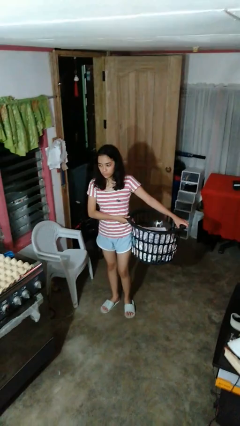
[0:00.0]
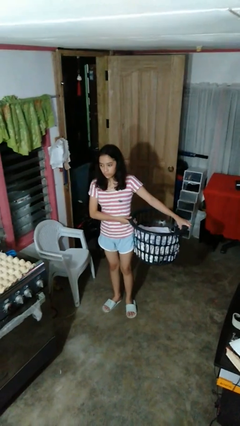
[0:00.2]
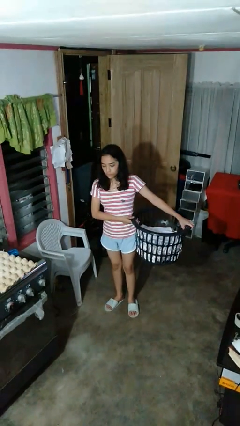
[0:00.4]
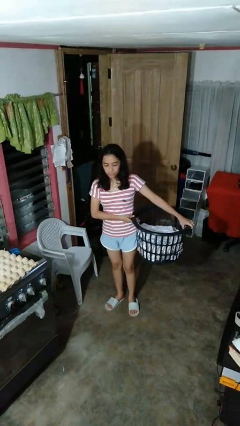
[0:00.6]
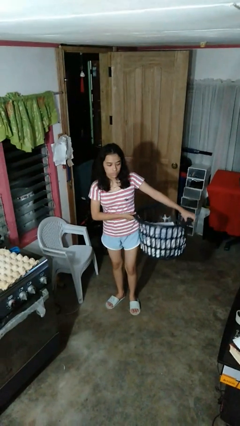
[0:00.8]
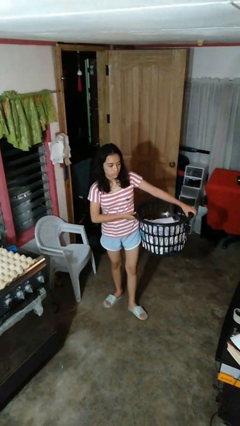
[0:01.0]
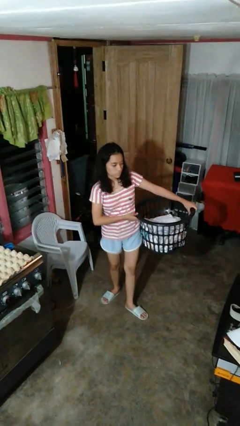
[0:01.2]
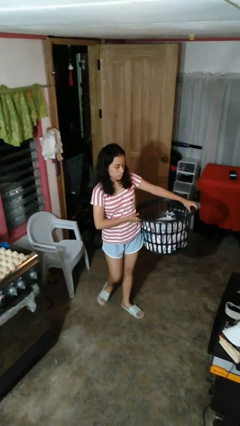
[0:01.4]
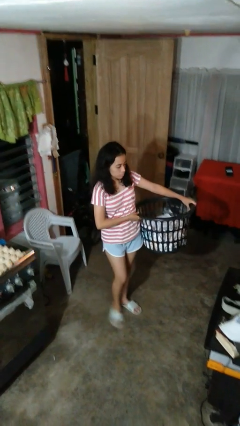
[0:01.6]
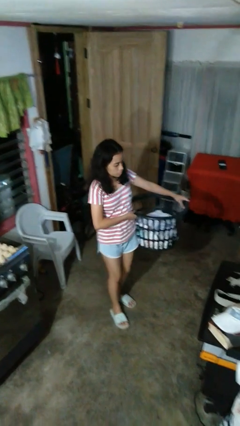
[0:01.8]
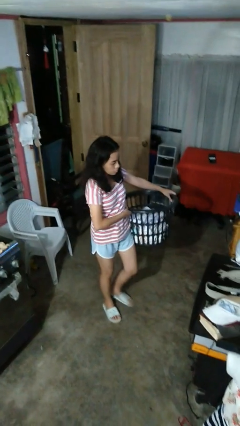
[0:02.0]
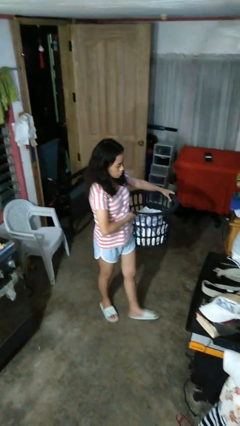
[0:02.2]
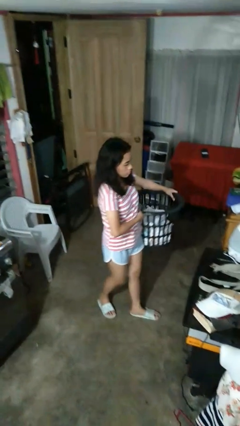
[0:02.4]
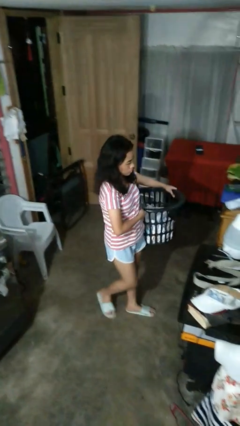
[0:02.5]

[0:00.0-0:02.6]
person carries laundry basket

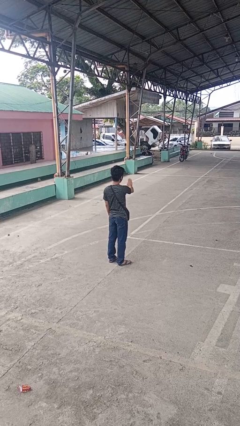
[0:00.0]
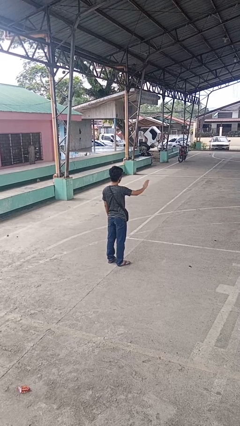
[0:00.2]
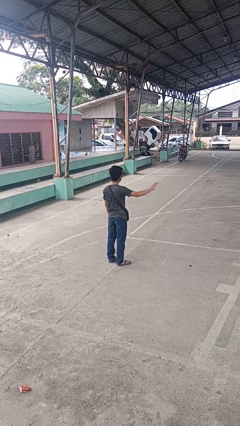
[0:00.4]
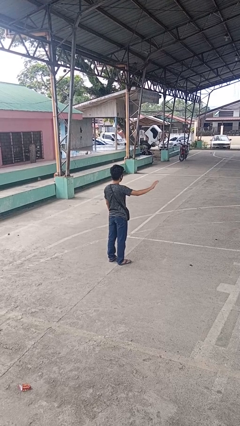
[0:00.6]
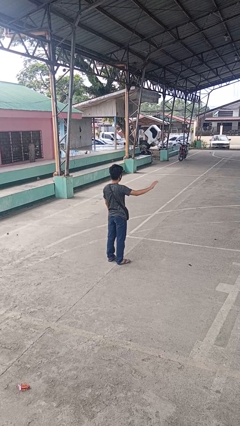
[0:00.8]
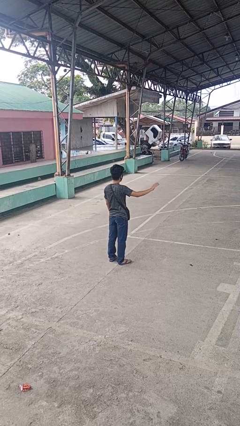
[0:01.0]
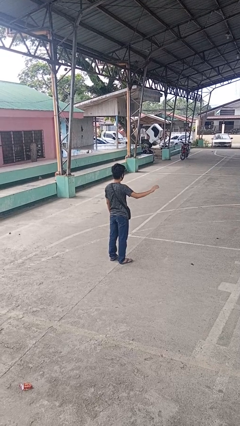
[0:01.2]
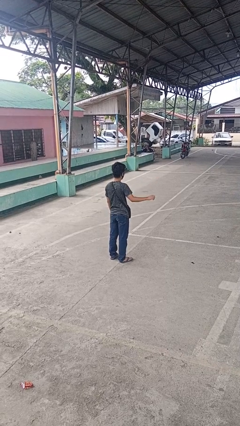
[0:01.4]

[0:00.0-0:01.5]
person gestures swipe right

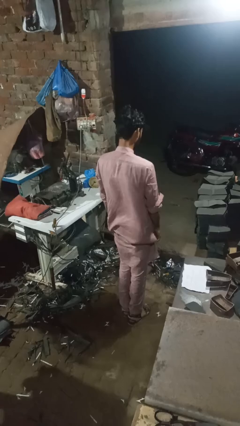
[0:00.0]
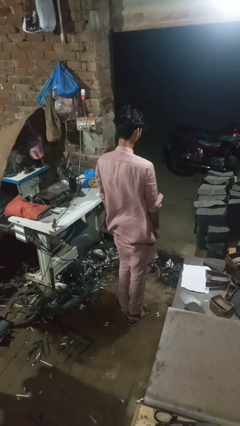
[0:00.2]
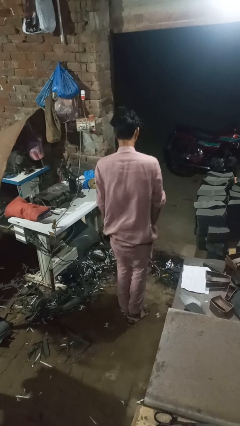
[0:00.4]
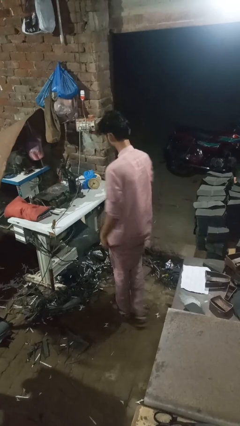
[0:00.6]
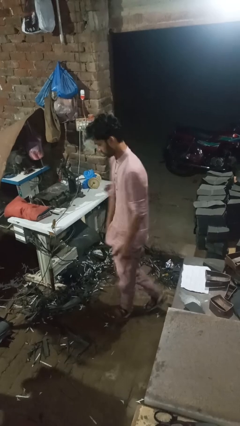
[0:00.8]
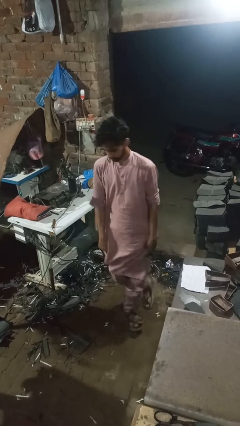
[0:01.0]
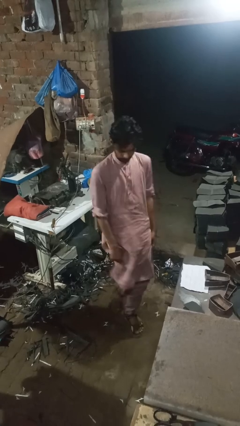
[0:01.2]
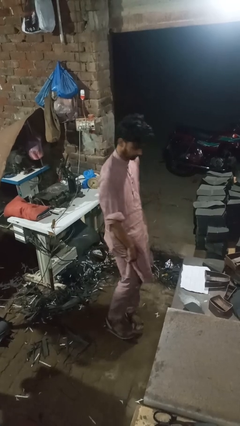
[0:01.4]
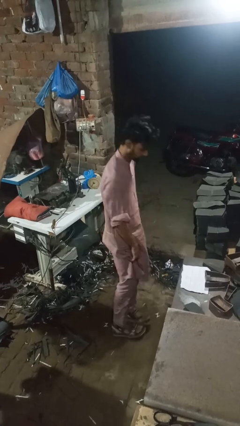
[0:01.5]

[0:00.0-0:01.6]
person twirls

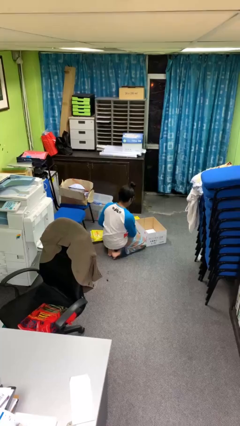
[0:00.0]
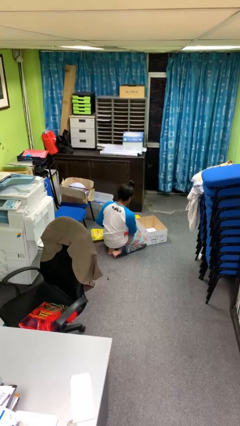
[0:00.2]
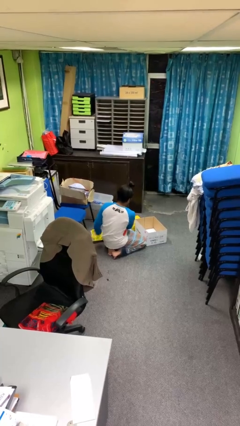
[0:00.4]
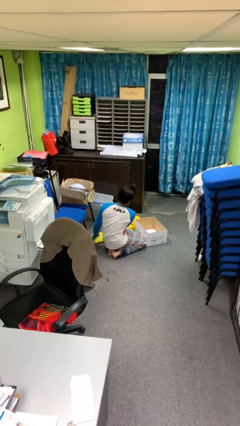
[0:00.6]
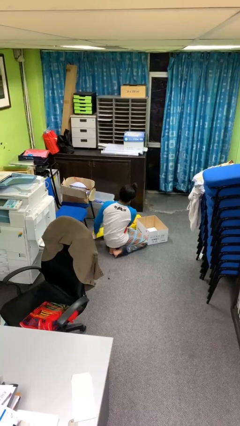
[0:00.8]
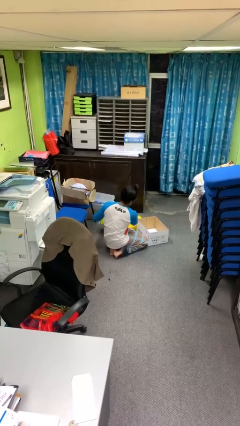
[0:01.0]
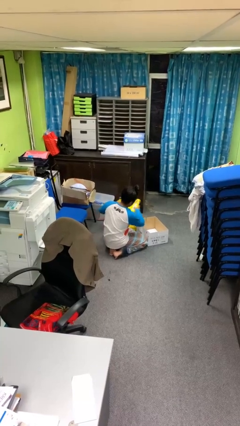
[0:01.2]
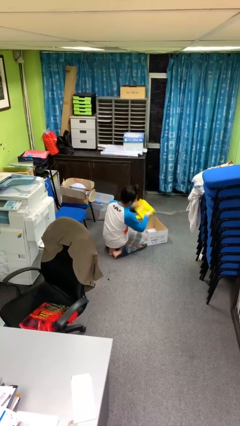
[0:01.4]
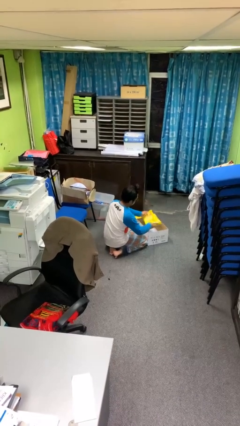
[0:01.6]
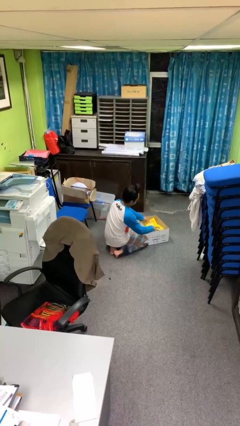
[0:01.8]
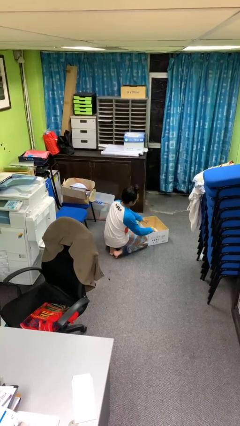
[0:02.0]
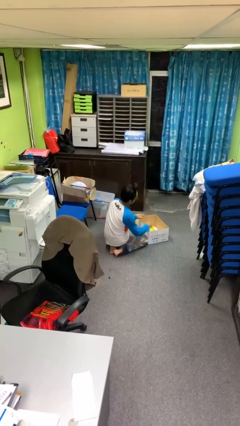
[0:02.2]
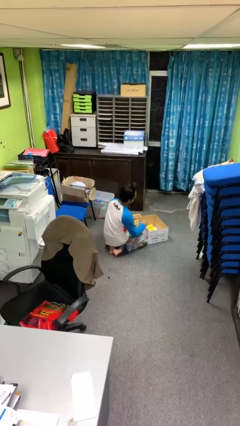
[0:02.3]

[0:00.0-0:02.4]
person puts object into box

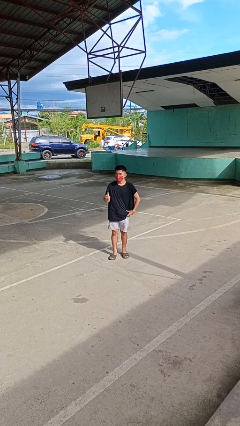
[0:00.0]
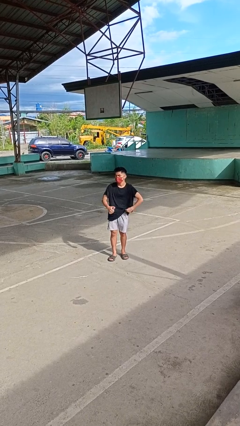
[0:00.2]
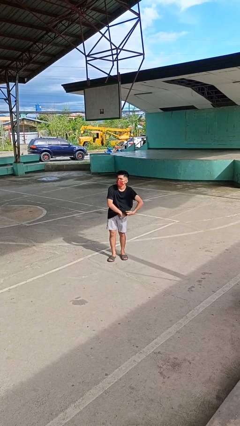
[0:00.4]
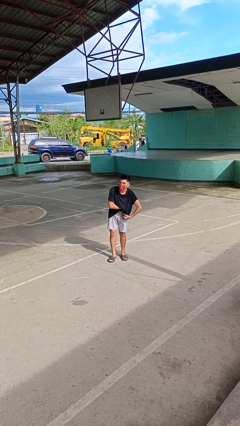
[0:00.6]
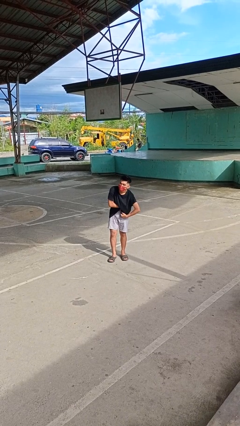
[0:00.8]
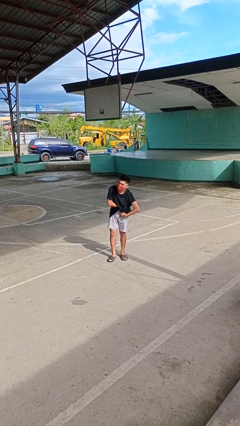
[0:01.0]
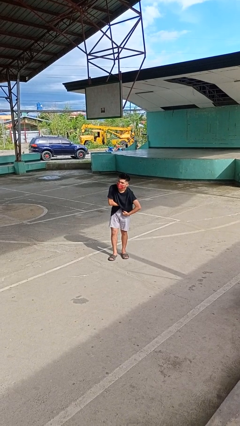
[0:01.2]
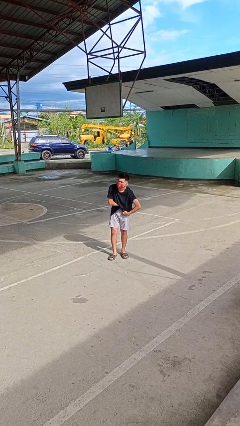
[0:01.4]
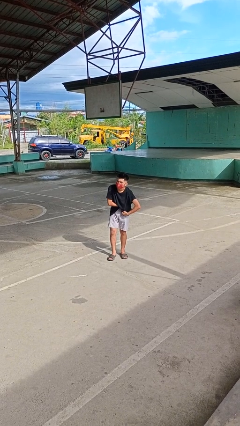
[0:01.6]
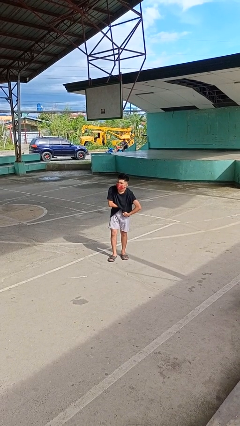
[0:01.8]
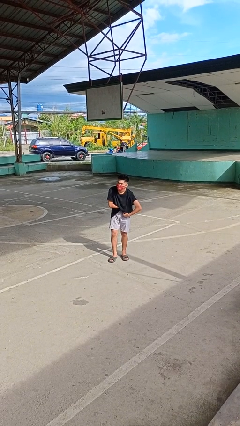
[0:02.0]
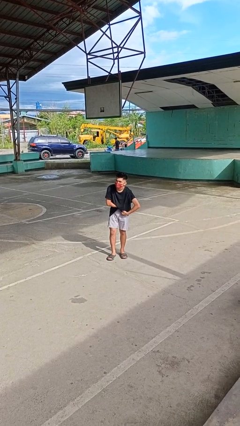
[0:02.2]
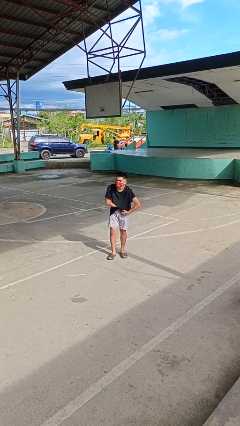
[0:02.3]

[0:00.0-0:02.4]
person applies deodorant

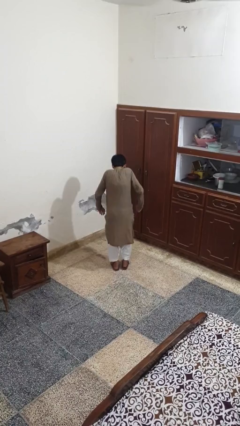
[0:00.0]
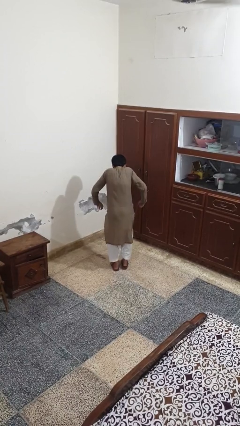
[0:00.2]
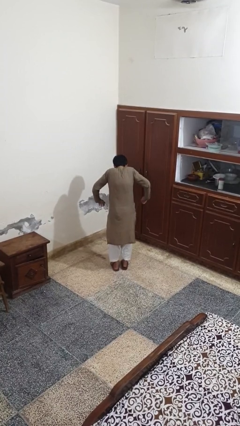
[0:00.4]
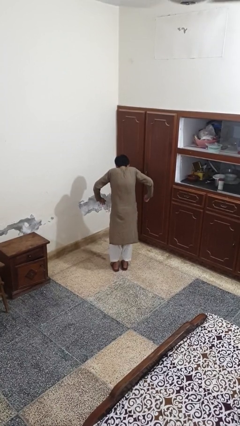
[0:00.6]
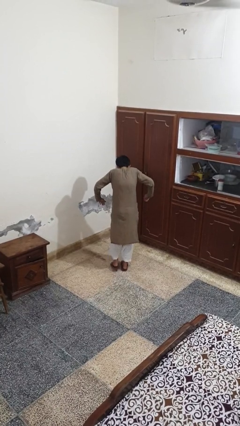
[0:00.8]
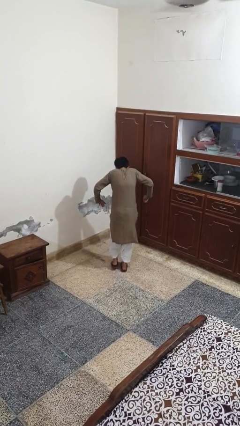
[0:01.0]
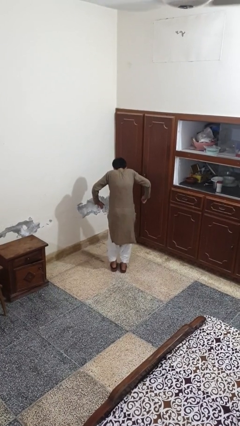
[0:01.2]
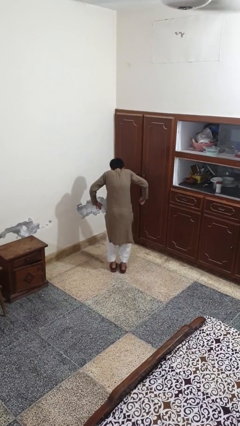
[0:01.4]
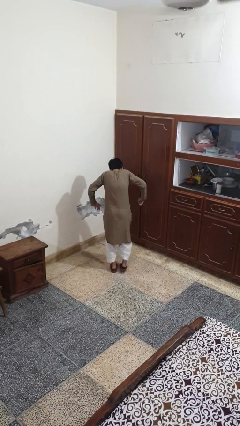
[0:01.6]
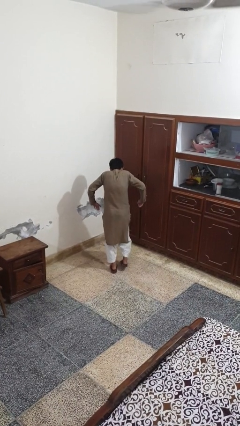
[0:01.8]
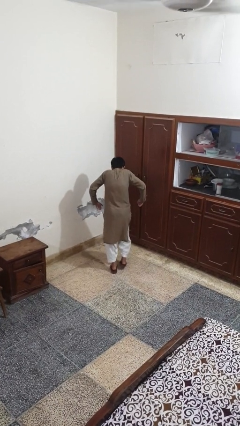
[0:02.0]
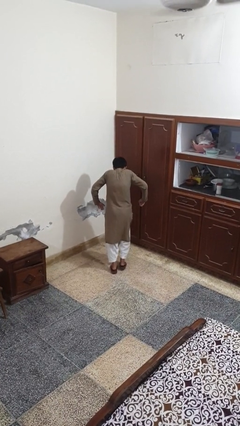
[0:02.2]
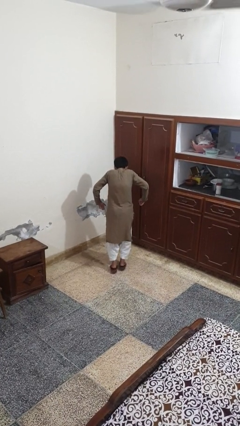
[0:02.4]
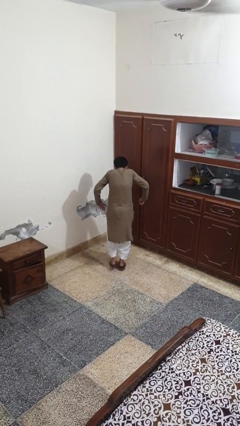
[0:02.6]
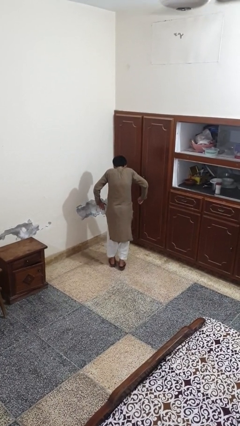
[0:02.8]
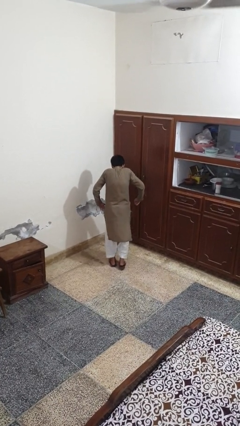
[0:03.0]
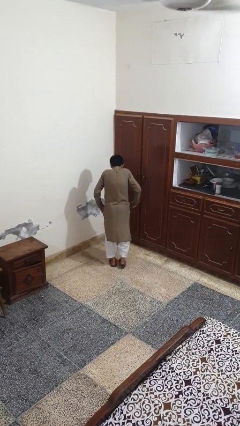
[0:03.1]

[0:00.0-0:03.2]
person walks tiptoe

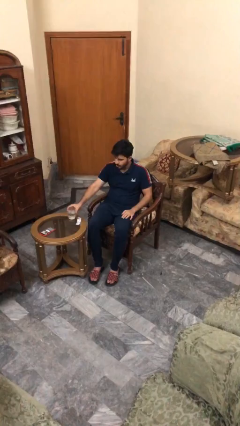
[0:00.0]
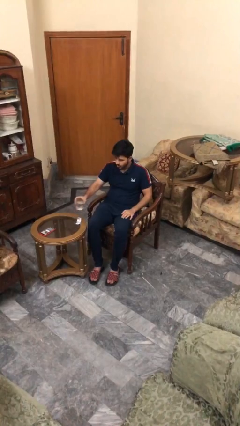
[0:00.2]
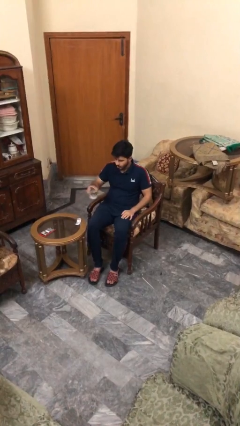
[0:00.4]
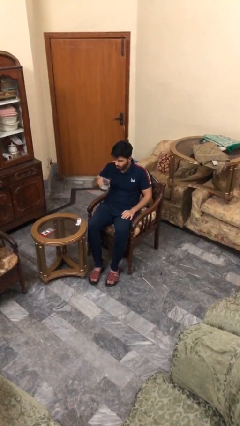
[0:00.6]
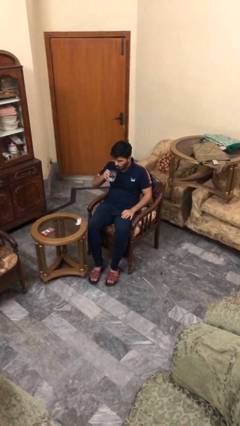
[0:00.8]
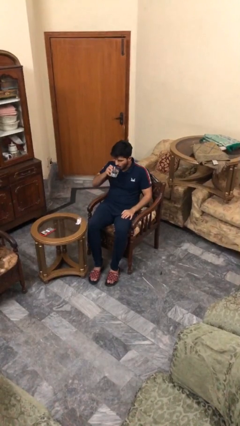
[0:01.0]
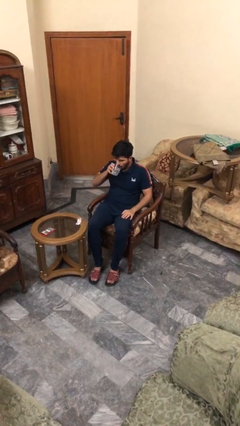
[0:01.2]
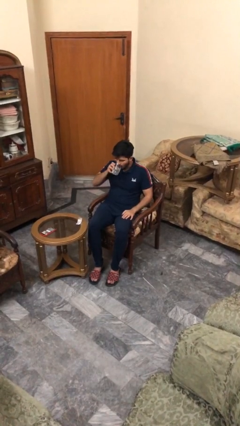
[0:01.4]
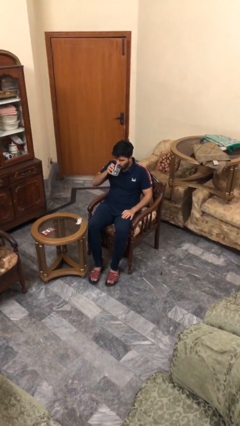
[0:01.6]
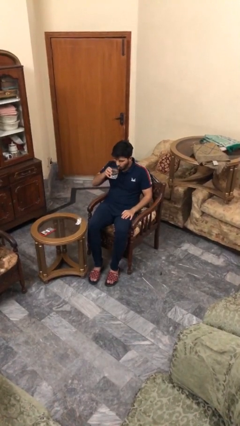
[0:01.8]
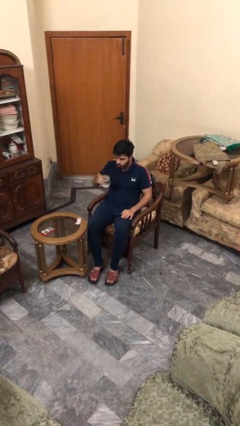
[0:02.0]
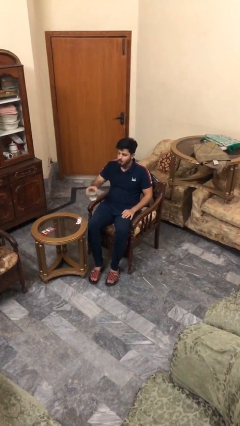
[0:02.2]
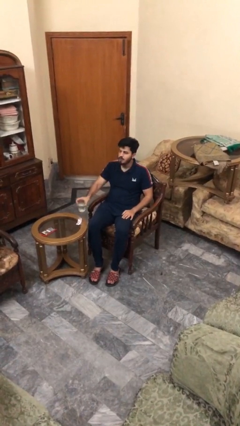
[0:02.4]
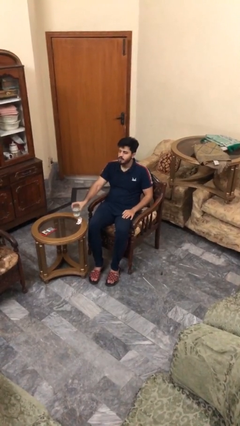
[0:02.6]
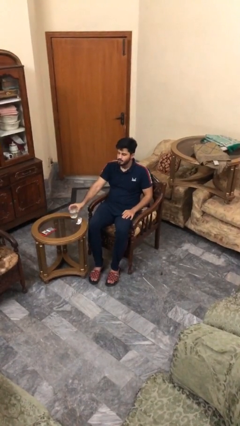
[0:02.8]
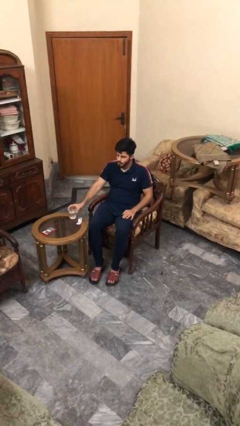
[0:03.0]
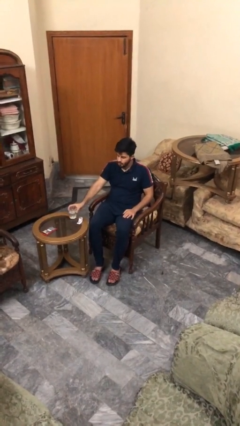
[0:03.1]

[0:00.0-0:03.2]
person drinks from cup

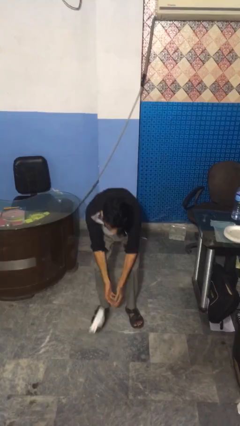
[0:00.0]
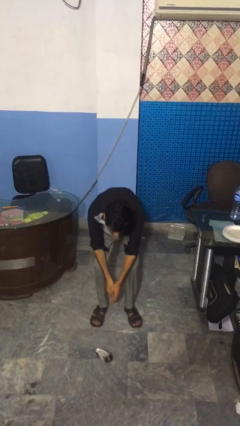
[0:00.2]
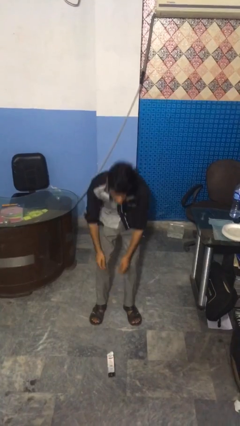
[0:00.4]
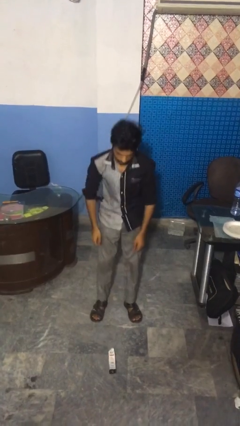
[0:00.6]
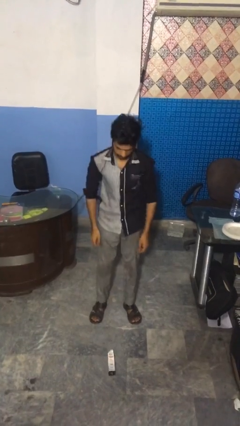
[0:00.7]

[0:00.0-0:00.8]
person catches dropped object
